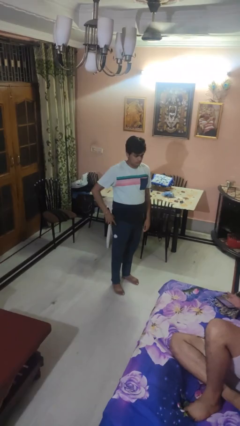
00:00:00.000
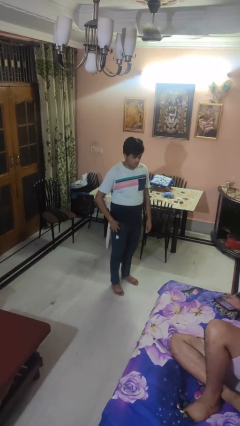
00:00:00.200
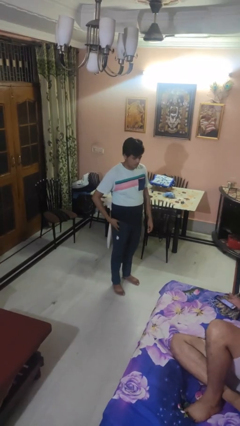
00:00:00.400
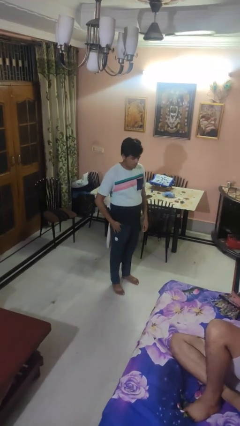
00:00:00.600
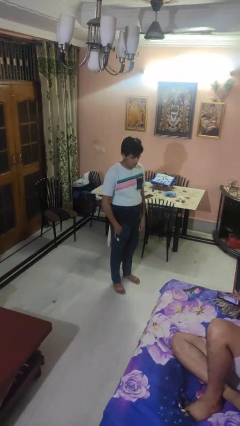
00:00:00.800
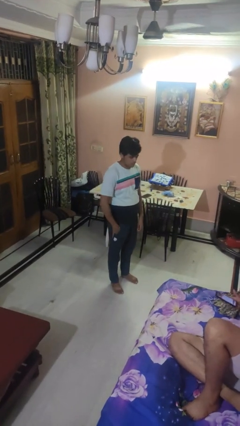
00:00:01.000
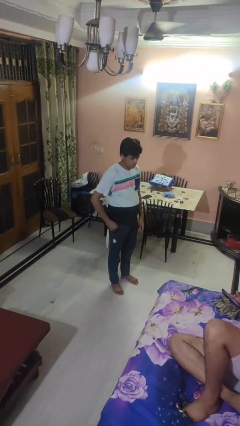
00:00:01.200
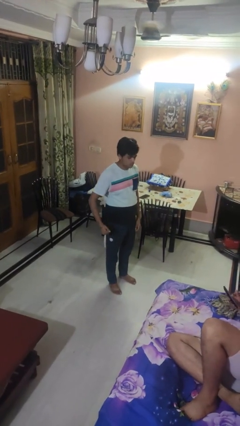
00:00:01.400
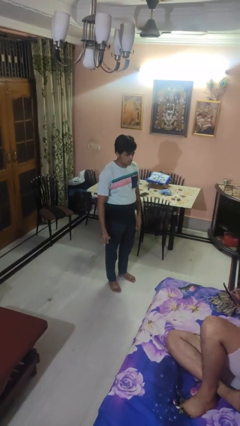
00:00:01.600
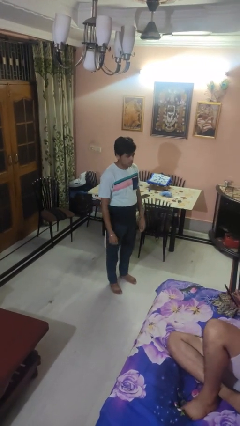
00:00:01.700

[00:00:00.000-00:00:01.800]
person puts phone into pocket

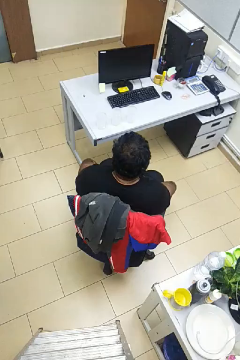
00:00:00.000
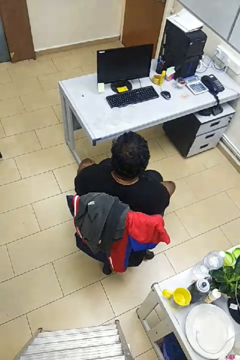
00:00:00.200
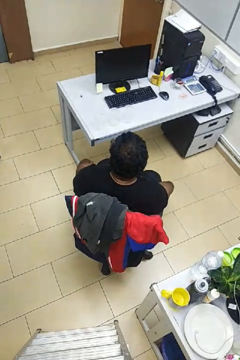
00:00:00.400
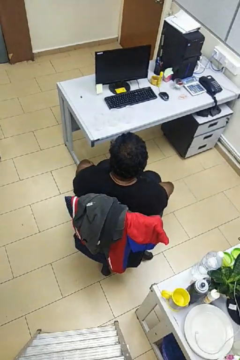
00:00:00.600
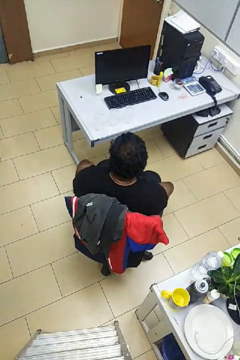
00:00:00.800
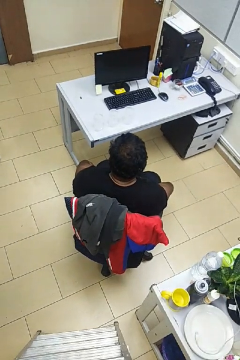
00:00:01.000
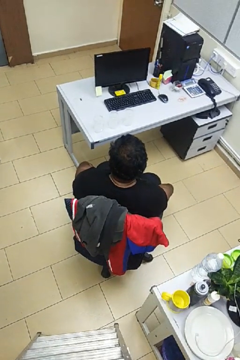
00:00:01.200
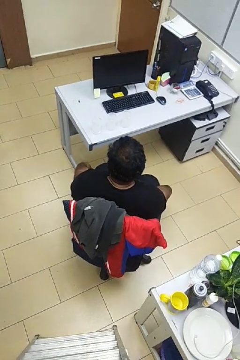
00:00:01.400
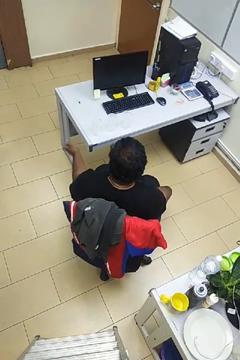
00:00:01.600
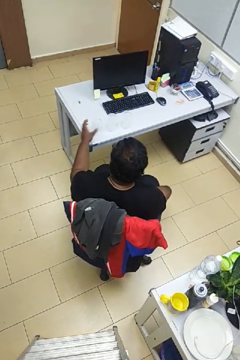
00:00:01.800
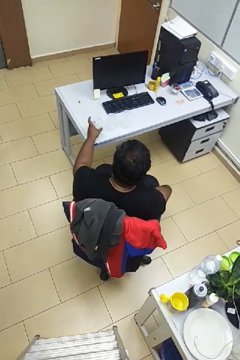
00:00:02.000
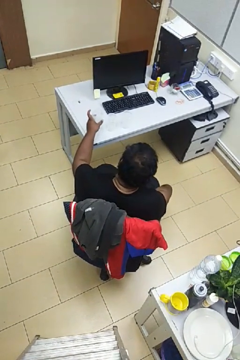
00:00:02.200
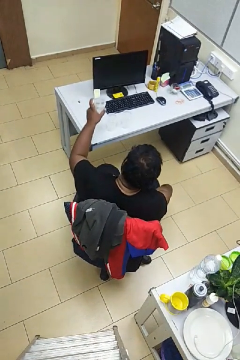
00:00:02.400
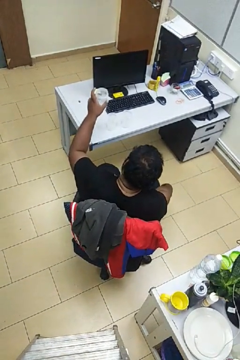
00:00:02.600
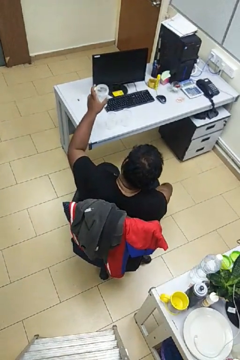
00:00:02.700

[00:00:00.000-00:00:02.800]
person picks up object from table

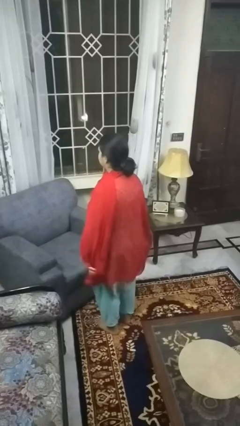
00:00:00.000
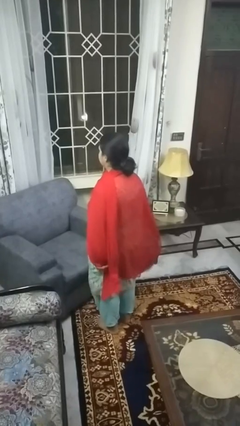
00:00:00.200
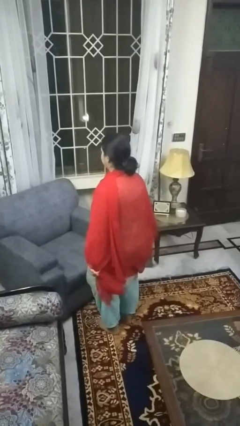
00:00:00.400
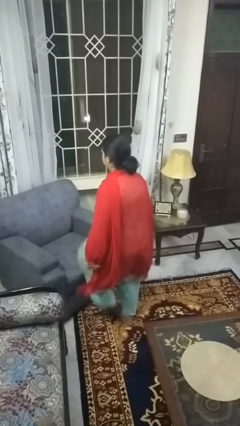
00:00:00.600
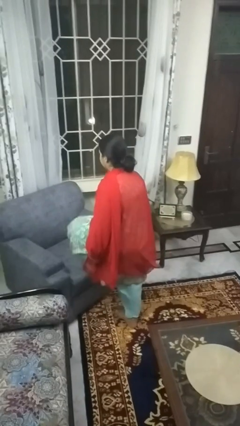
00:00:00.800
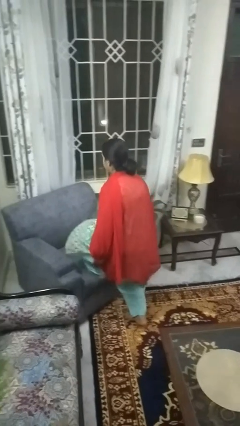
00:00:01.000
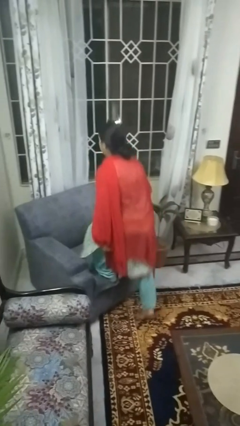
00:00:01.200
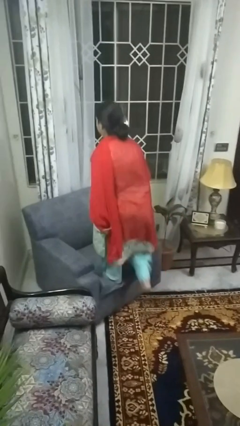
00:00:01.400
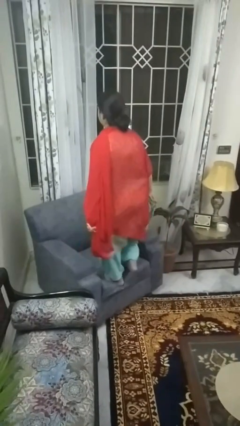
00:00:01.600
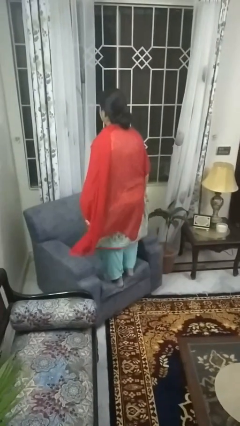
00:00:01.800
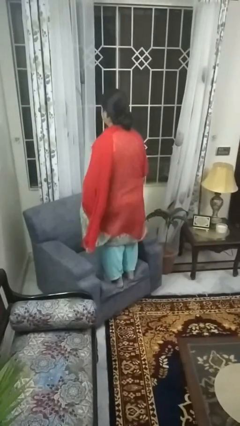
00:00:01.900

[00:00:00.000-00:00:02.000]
person climbs on couch

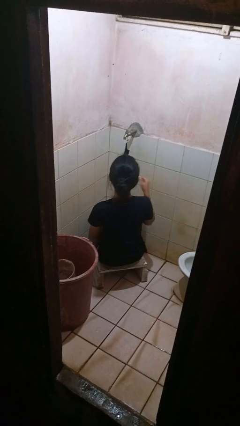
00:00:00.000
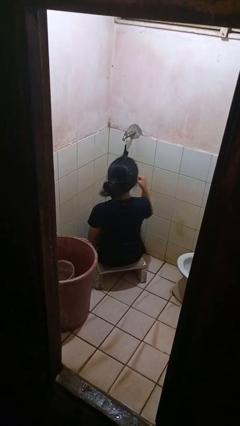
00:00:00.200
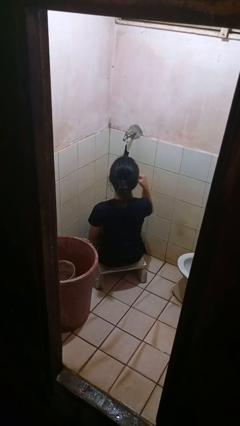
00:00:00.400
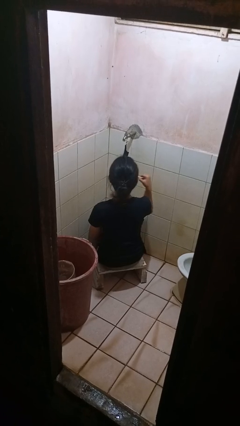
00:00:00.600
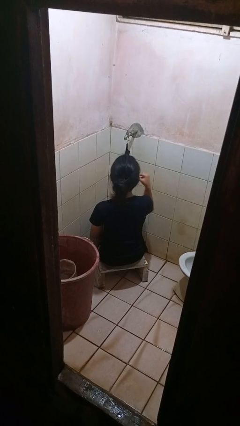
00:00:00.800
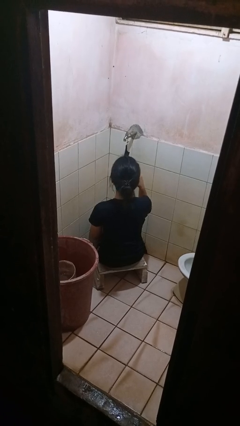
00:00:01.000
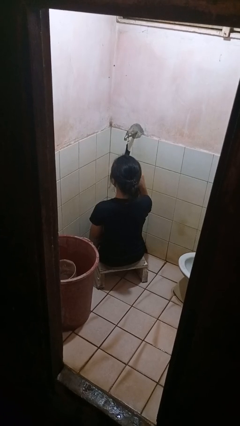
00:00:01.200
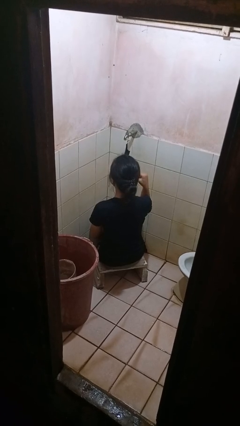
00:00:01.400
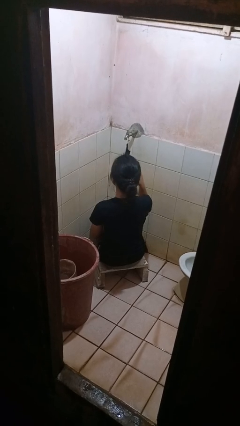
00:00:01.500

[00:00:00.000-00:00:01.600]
person brushes teeth

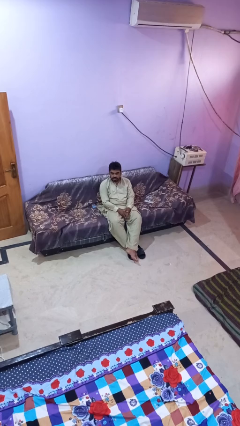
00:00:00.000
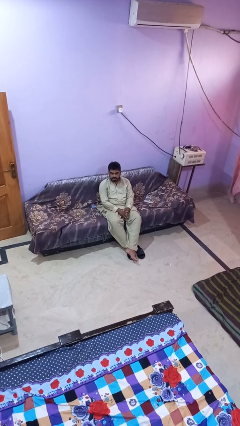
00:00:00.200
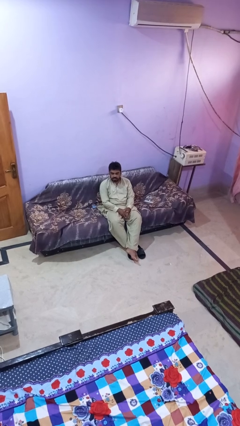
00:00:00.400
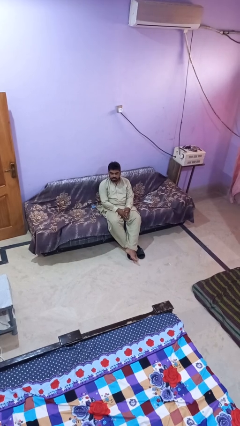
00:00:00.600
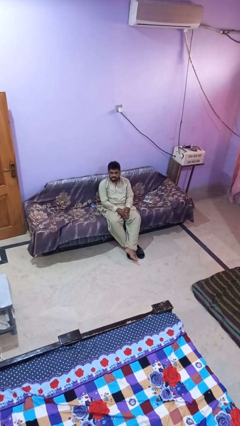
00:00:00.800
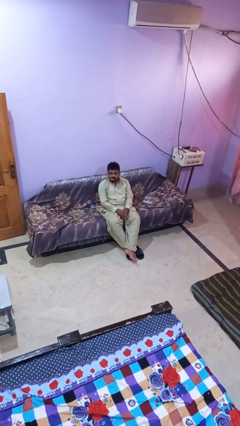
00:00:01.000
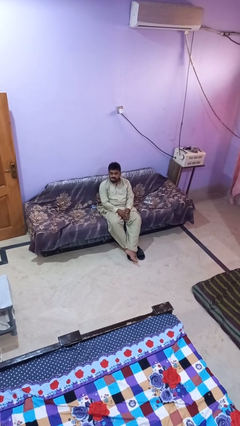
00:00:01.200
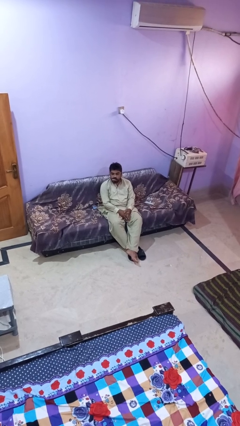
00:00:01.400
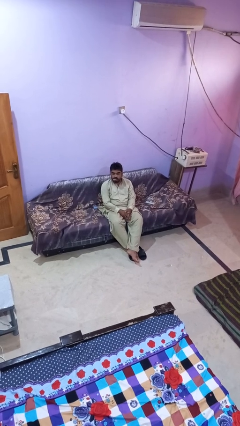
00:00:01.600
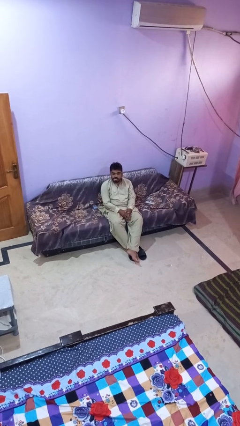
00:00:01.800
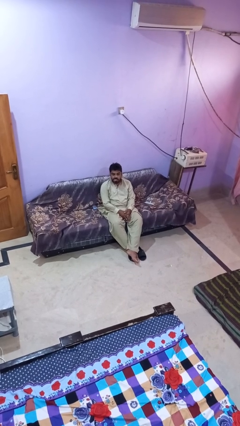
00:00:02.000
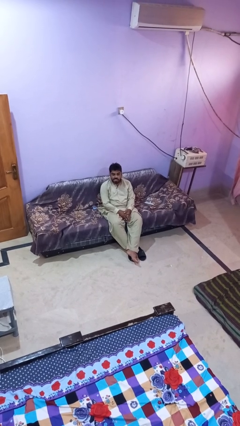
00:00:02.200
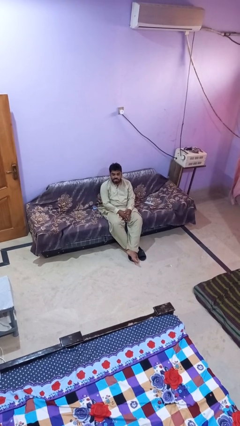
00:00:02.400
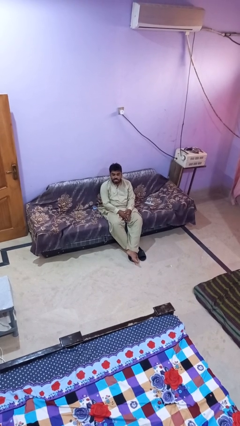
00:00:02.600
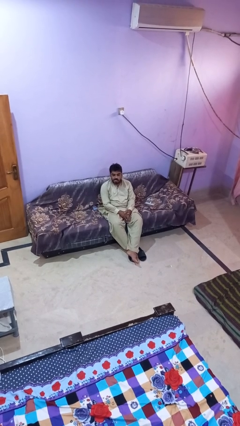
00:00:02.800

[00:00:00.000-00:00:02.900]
person sticks out tongue

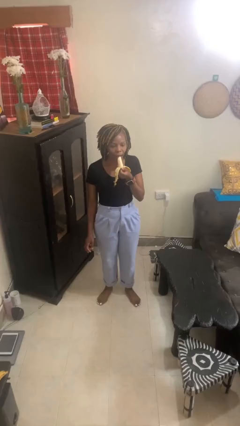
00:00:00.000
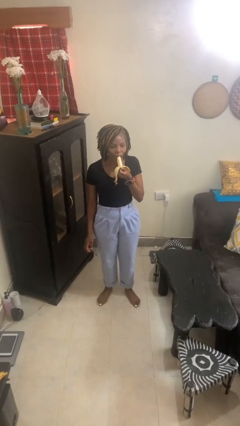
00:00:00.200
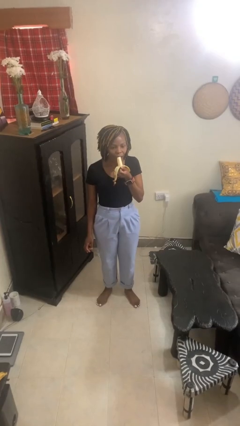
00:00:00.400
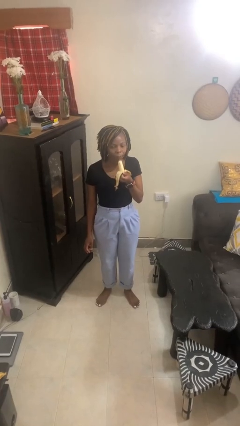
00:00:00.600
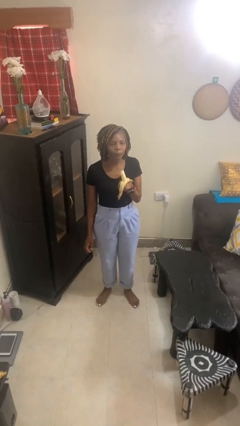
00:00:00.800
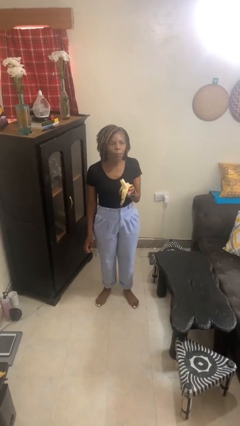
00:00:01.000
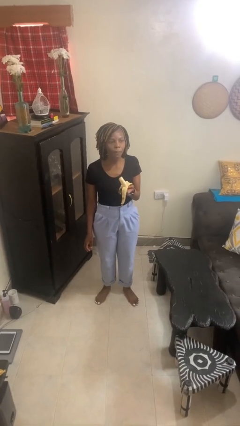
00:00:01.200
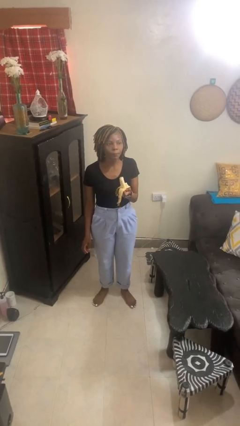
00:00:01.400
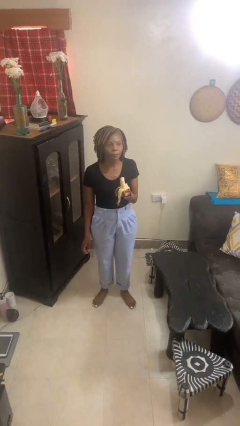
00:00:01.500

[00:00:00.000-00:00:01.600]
person eats banana

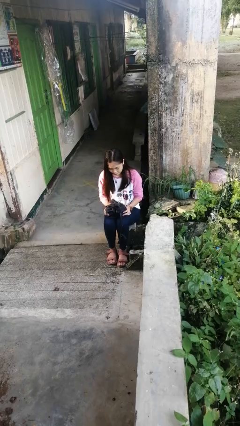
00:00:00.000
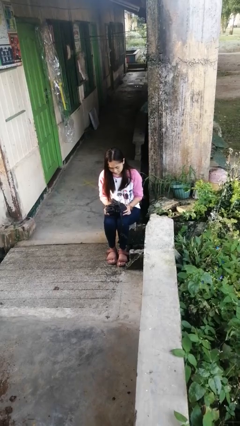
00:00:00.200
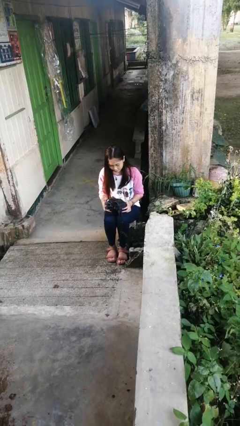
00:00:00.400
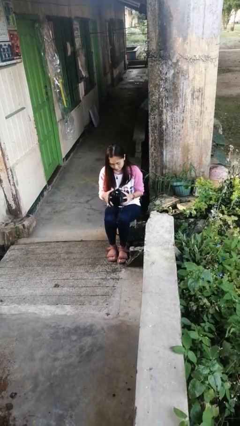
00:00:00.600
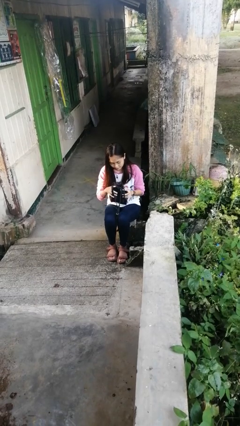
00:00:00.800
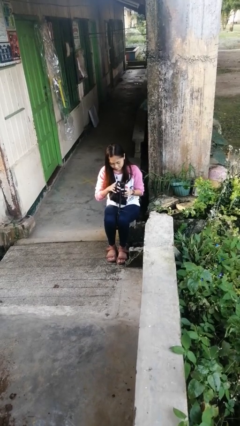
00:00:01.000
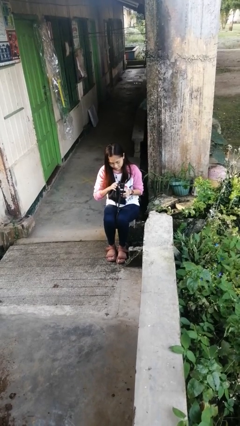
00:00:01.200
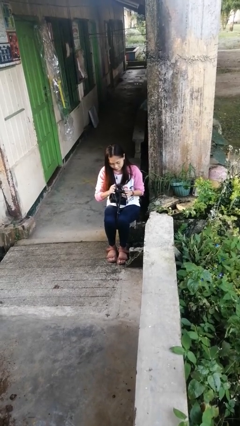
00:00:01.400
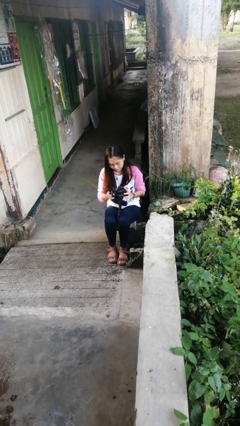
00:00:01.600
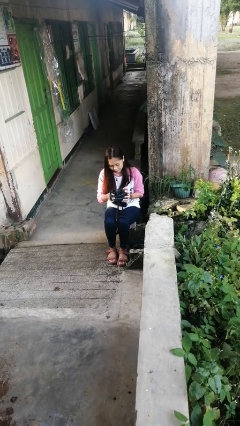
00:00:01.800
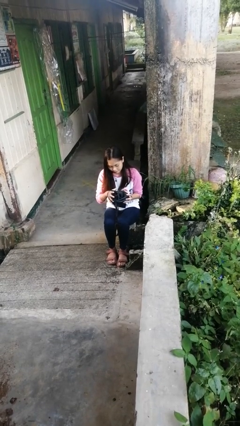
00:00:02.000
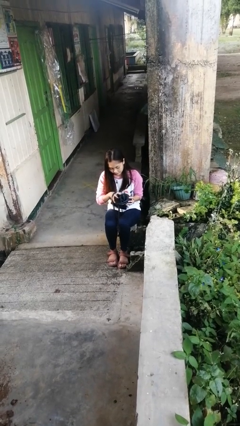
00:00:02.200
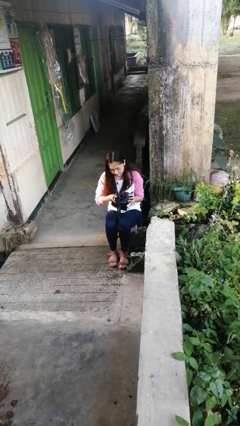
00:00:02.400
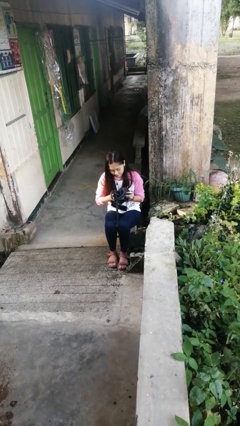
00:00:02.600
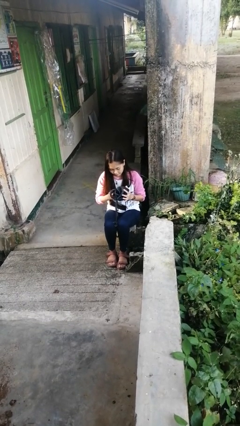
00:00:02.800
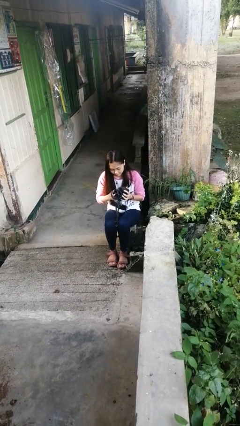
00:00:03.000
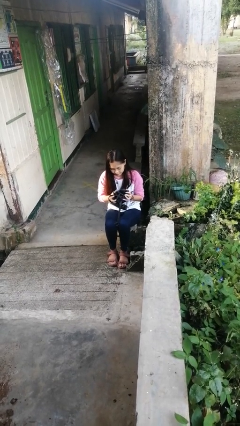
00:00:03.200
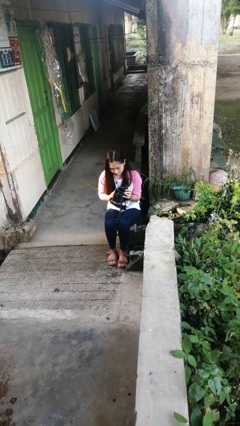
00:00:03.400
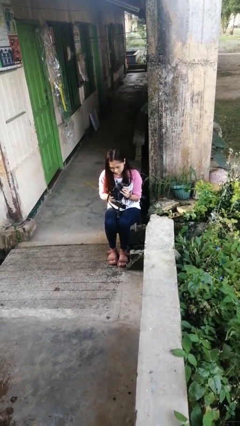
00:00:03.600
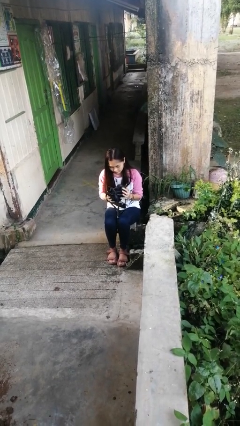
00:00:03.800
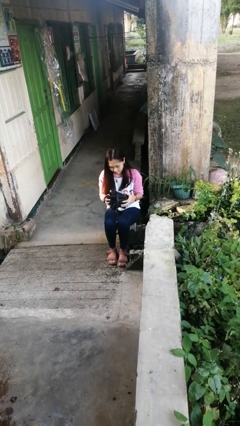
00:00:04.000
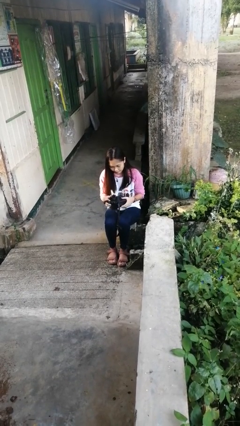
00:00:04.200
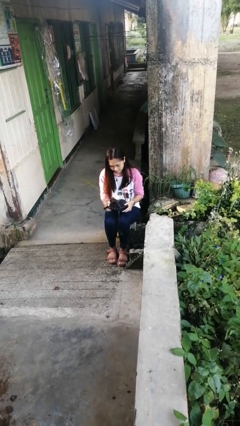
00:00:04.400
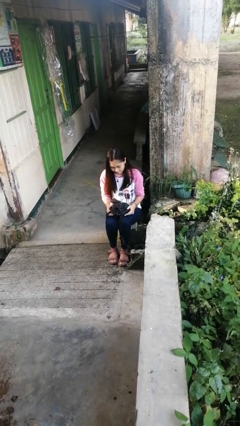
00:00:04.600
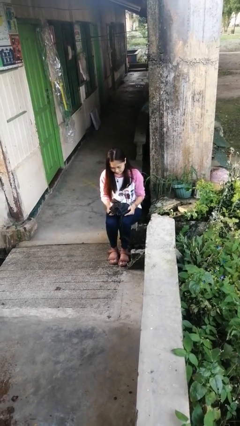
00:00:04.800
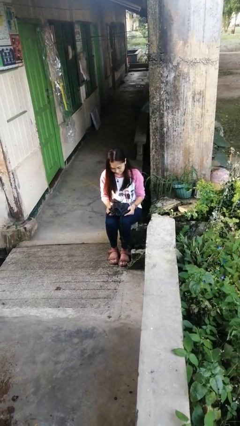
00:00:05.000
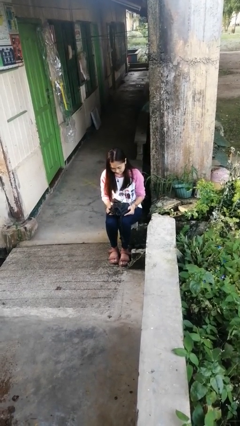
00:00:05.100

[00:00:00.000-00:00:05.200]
person squeezes object

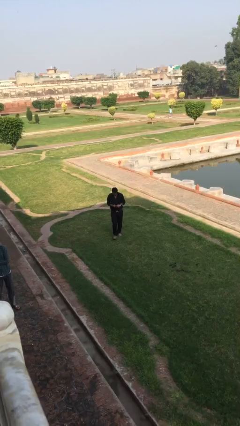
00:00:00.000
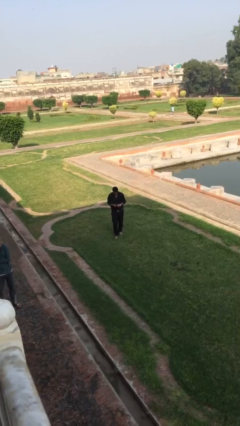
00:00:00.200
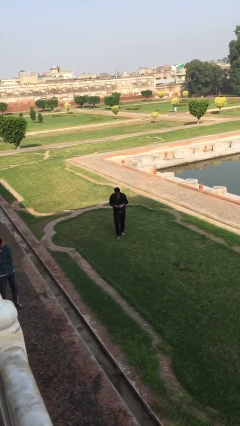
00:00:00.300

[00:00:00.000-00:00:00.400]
person talks on phone
